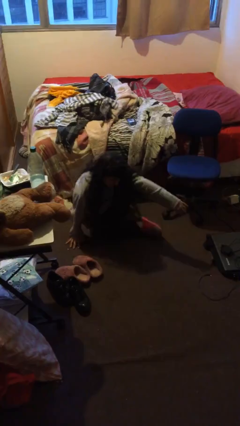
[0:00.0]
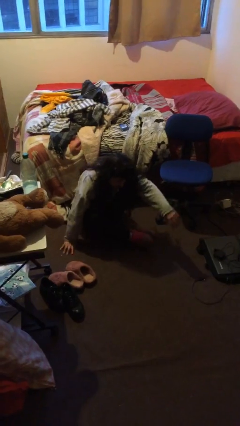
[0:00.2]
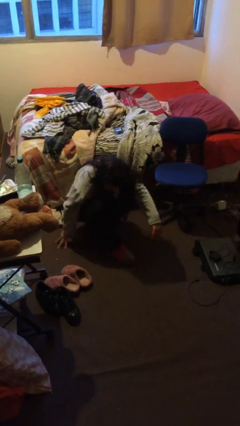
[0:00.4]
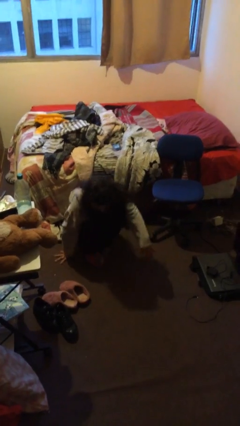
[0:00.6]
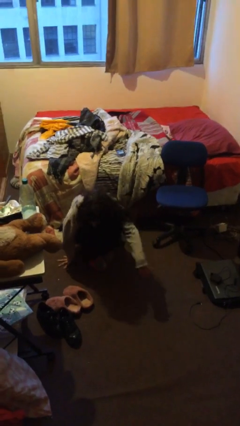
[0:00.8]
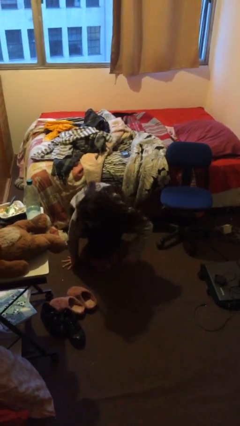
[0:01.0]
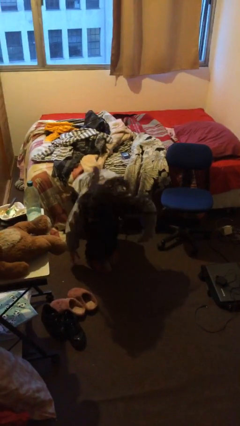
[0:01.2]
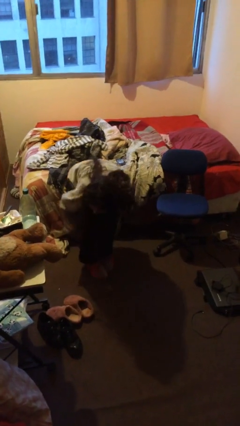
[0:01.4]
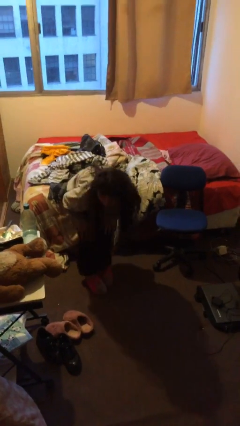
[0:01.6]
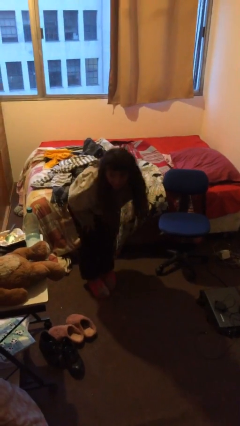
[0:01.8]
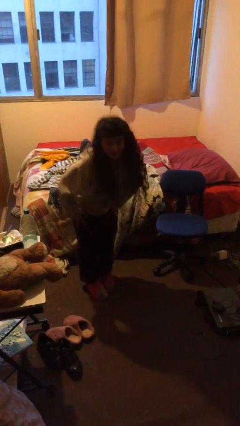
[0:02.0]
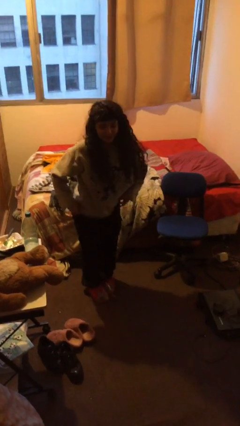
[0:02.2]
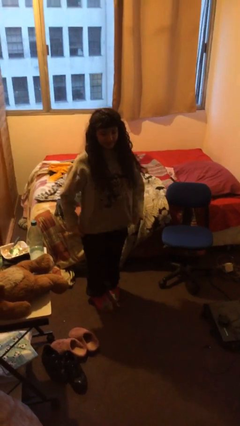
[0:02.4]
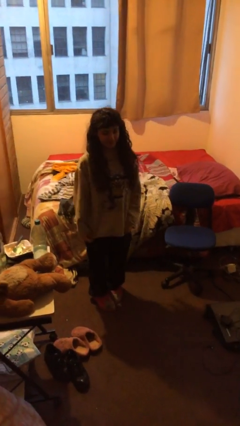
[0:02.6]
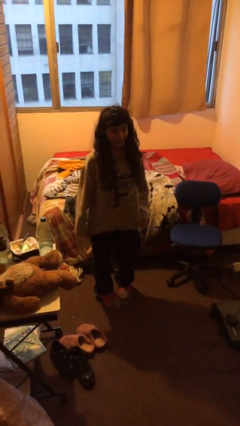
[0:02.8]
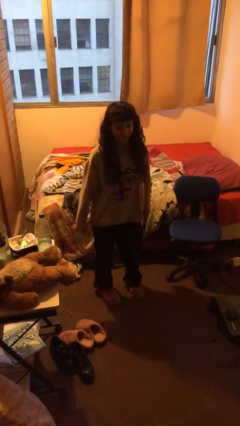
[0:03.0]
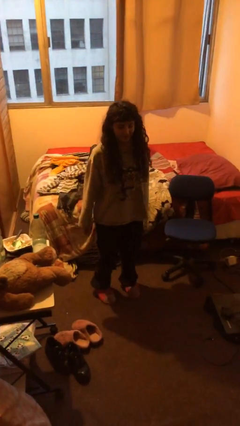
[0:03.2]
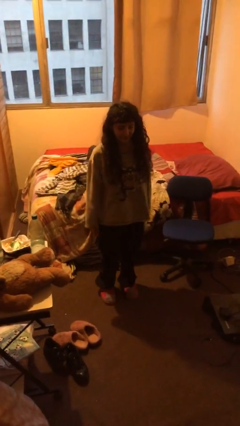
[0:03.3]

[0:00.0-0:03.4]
person stands up from floor

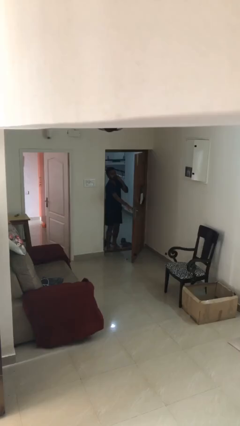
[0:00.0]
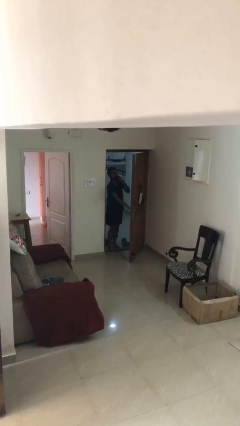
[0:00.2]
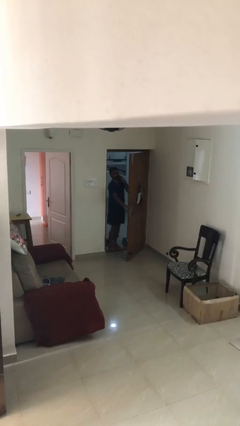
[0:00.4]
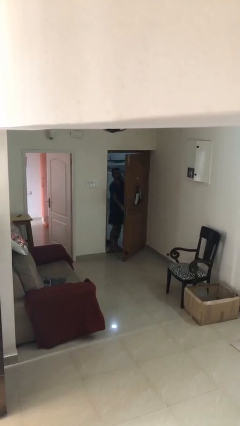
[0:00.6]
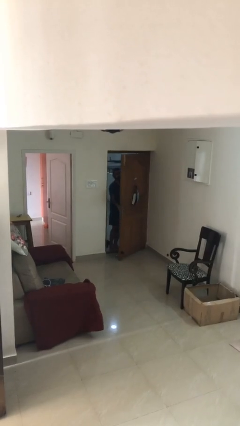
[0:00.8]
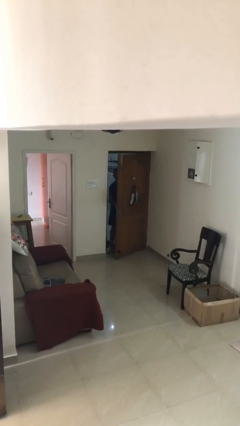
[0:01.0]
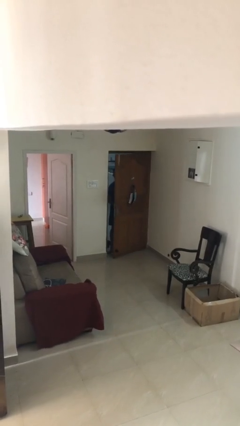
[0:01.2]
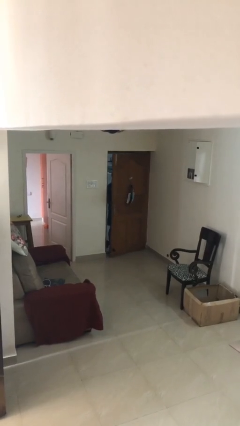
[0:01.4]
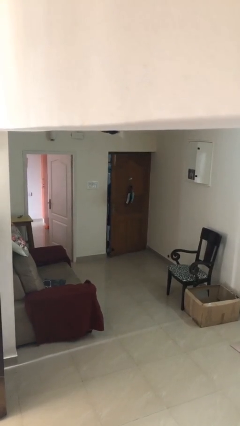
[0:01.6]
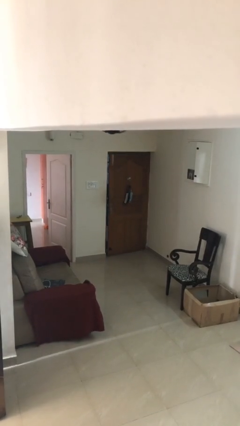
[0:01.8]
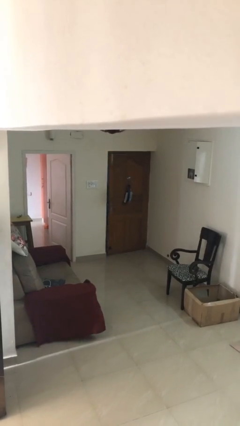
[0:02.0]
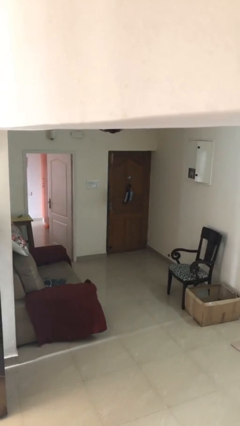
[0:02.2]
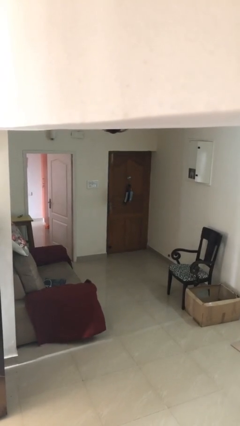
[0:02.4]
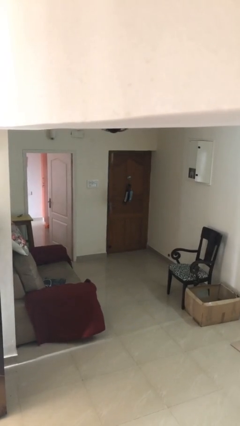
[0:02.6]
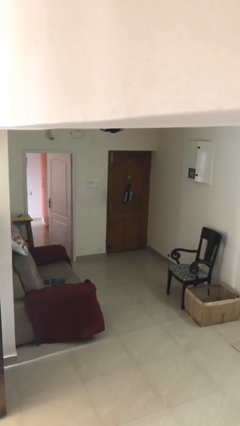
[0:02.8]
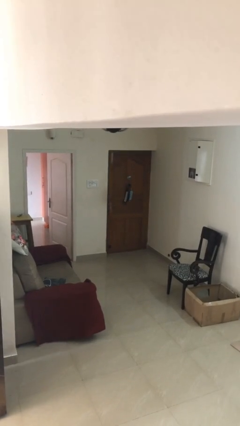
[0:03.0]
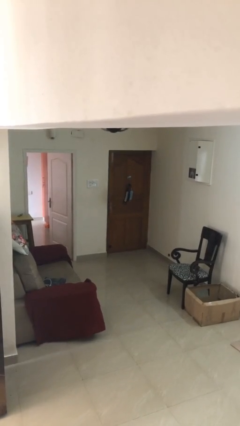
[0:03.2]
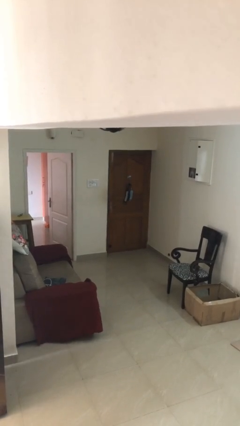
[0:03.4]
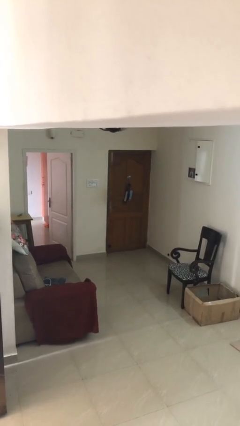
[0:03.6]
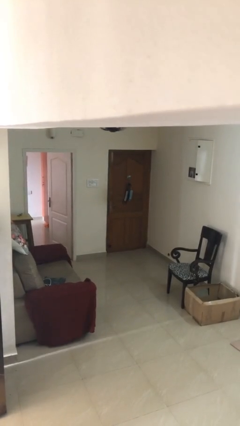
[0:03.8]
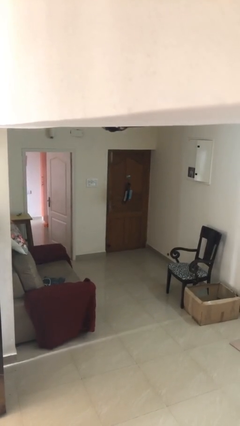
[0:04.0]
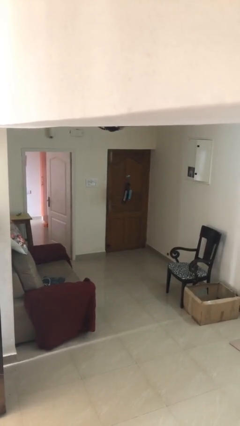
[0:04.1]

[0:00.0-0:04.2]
person closes facility door

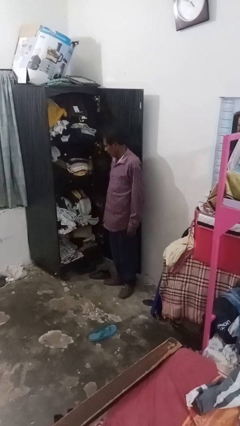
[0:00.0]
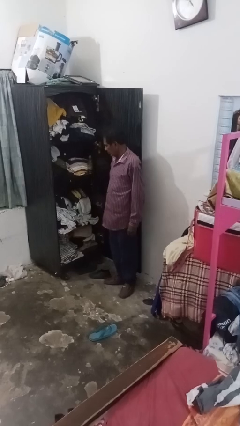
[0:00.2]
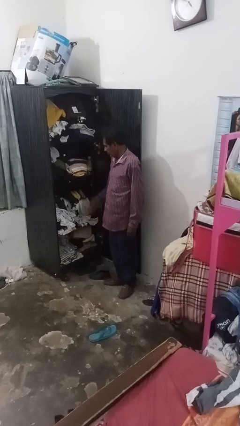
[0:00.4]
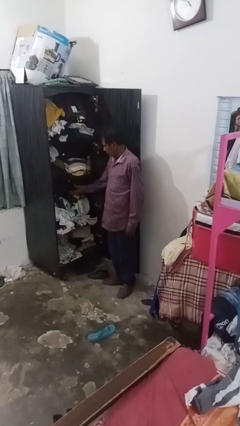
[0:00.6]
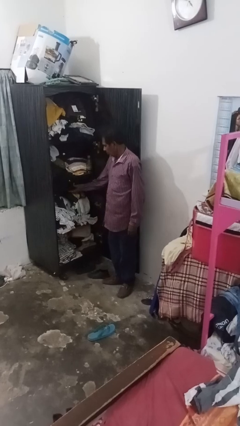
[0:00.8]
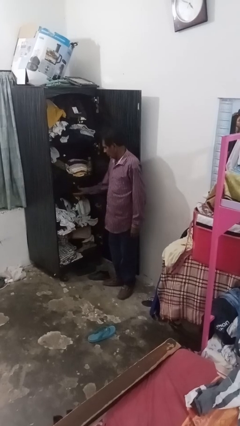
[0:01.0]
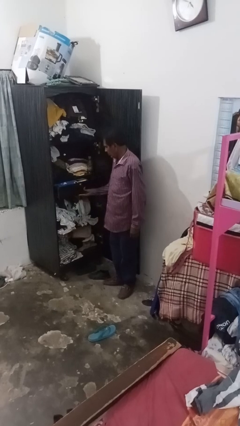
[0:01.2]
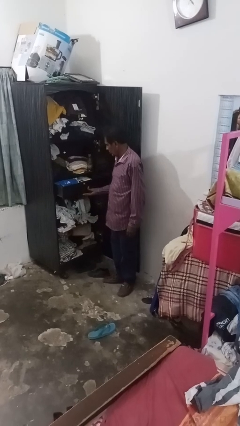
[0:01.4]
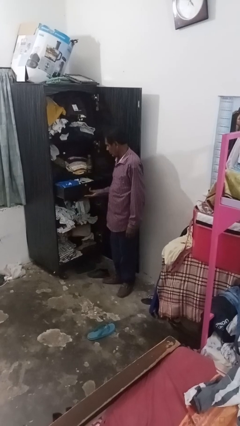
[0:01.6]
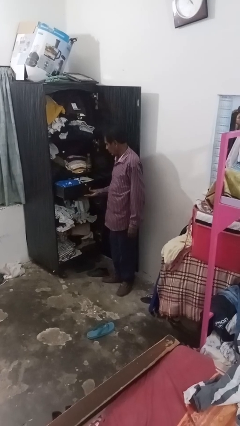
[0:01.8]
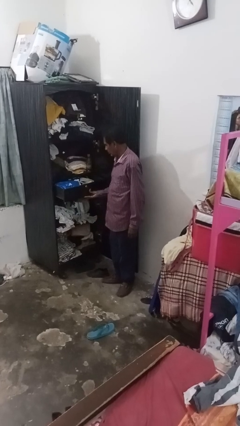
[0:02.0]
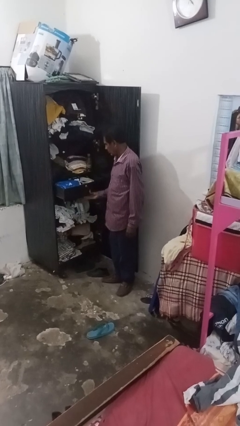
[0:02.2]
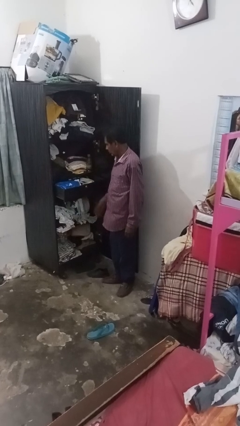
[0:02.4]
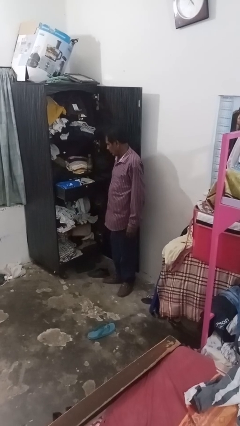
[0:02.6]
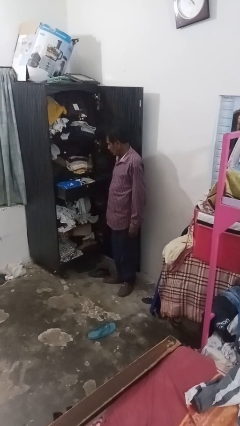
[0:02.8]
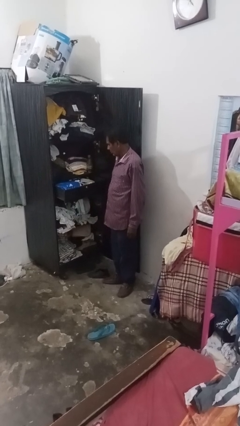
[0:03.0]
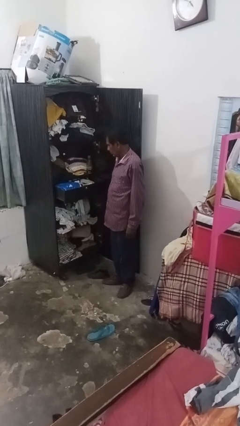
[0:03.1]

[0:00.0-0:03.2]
person opens dresser drawer

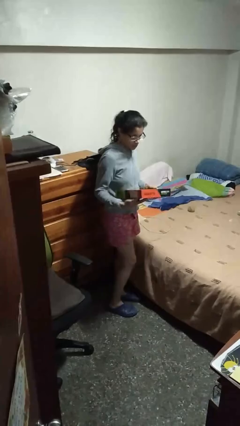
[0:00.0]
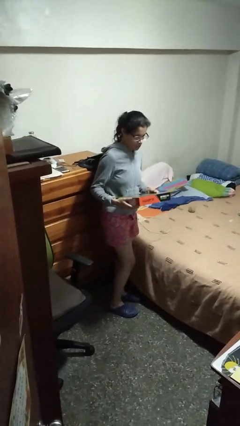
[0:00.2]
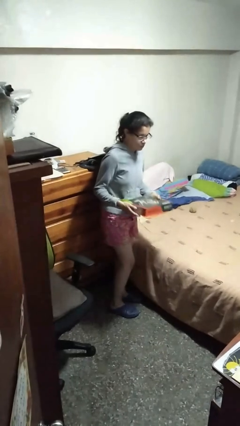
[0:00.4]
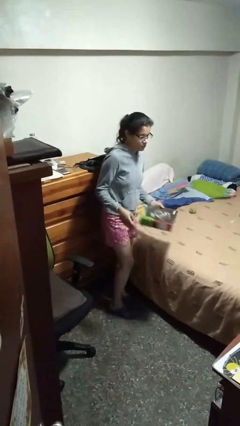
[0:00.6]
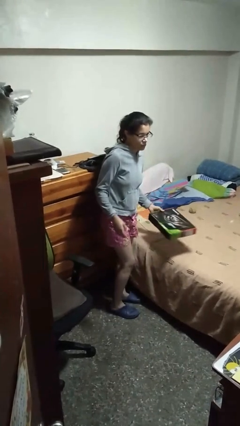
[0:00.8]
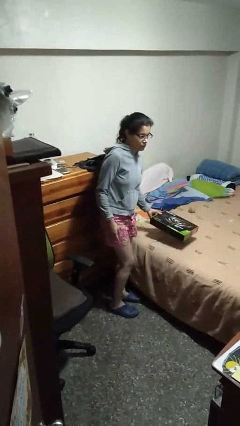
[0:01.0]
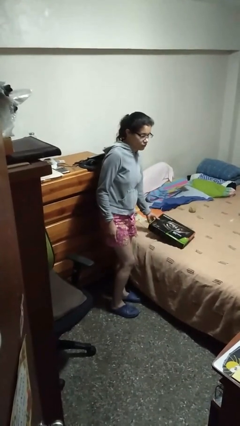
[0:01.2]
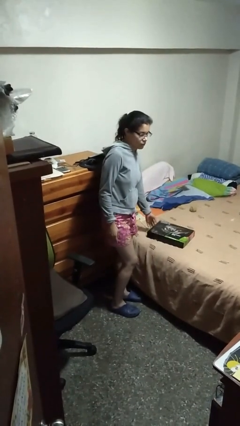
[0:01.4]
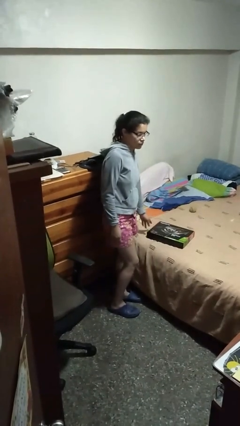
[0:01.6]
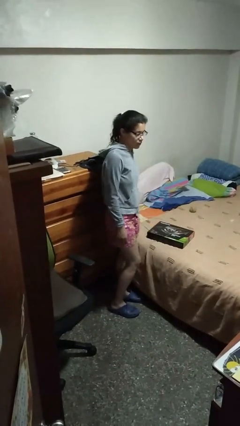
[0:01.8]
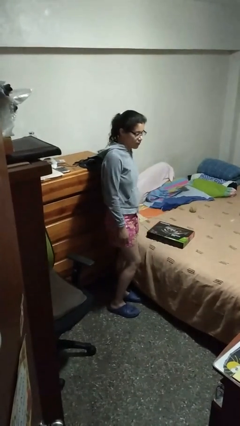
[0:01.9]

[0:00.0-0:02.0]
person puts down object on bed

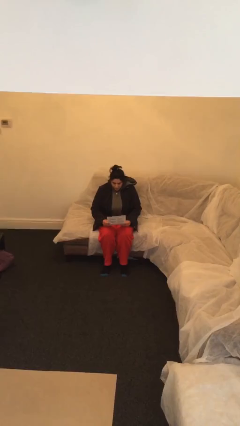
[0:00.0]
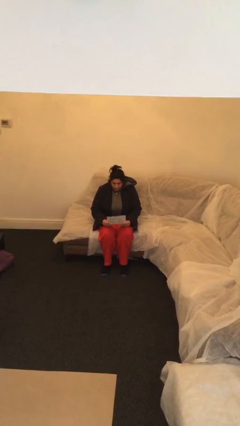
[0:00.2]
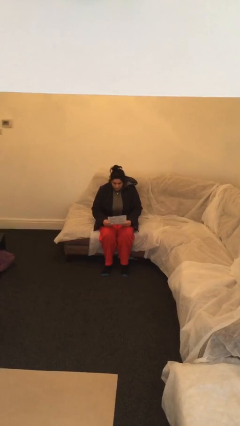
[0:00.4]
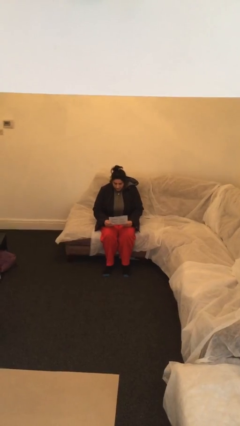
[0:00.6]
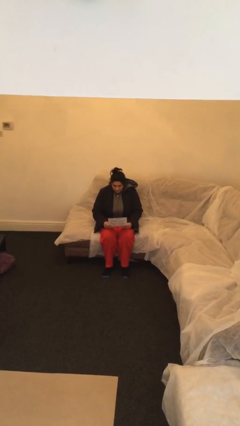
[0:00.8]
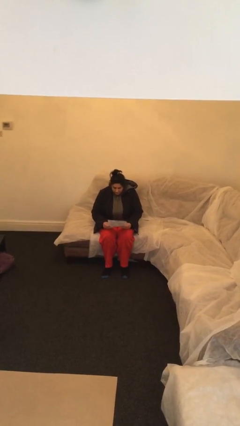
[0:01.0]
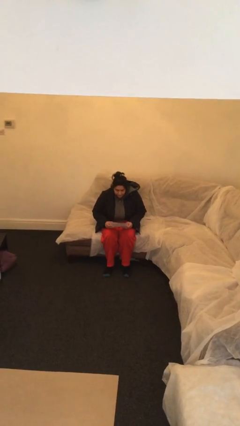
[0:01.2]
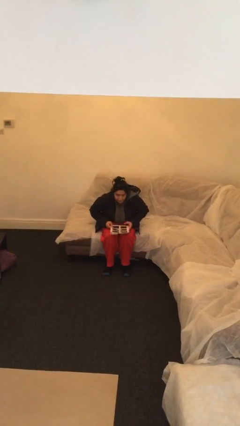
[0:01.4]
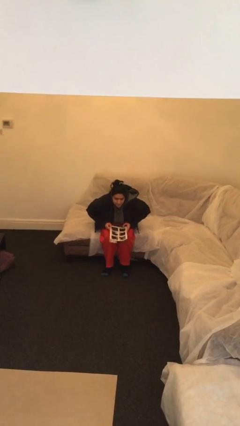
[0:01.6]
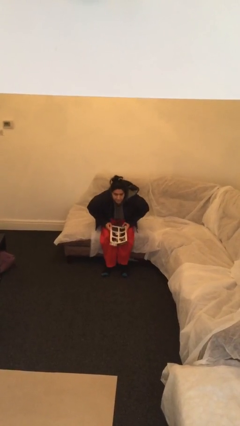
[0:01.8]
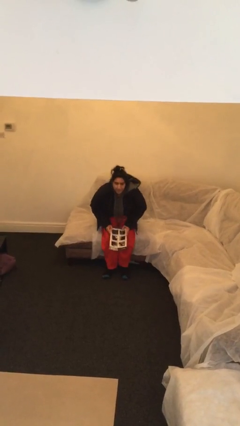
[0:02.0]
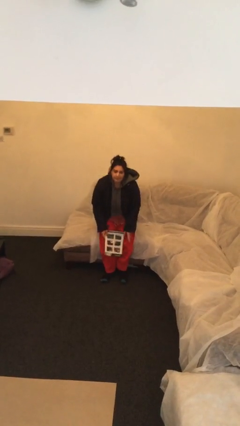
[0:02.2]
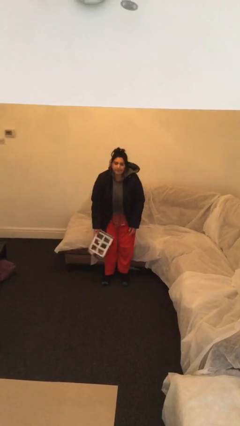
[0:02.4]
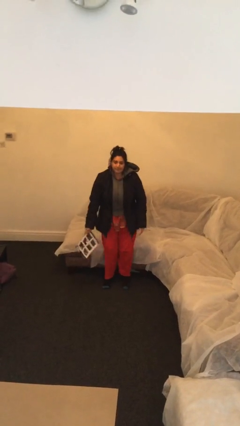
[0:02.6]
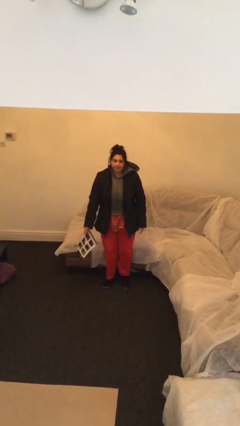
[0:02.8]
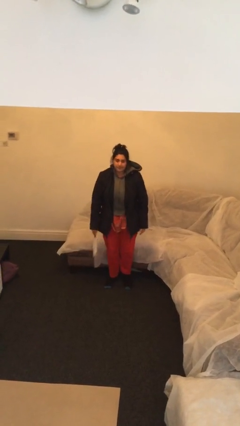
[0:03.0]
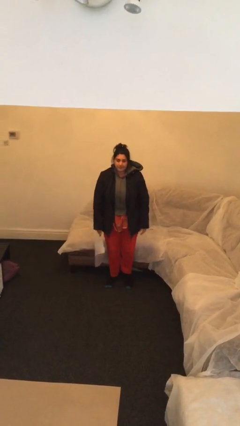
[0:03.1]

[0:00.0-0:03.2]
person stands up

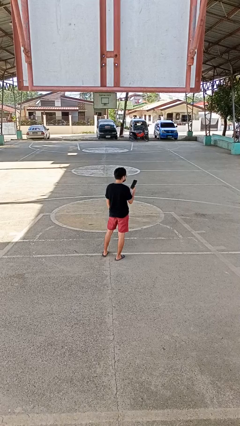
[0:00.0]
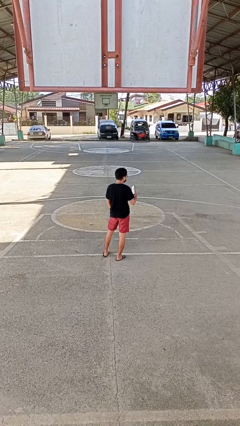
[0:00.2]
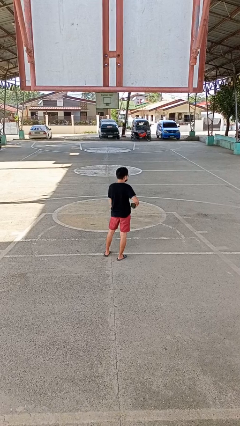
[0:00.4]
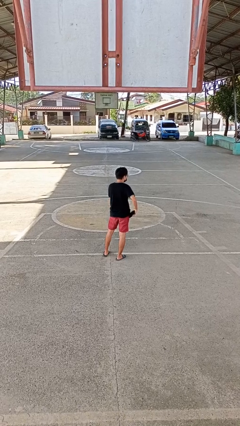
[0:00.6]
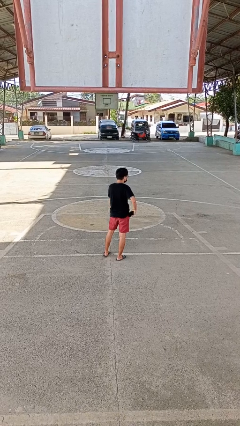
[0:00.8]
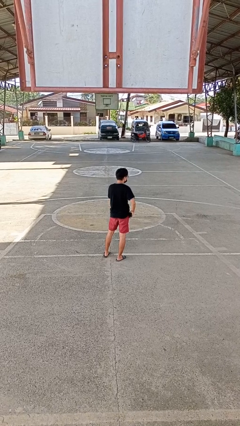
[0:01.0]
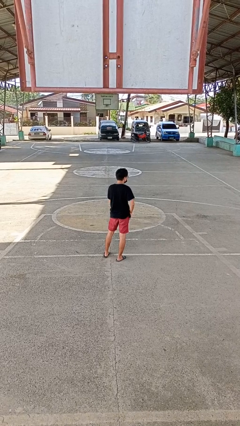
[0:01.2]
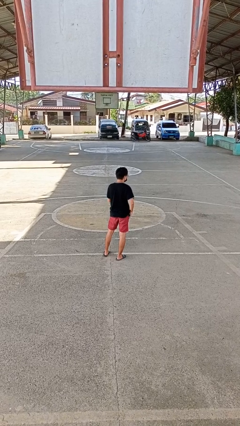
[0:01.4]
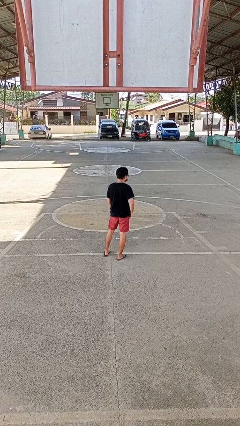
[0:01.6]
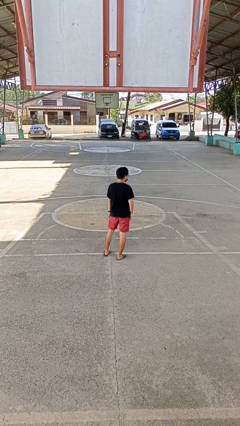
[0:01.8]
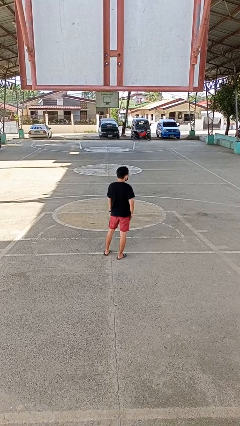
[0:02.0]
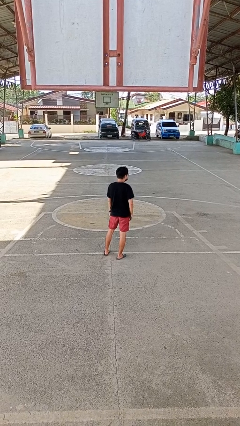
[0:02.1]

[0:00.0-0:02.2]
person puts phone into pocket
